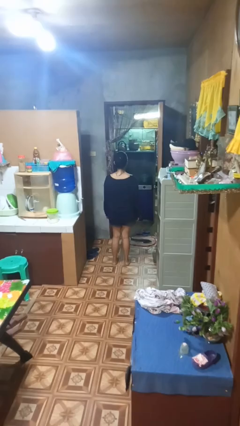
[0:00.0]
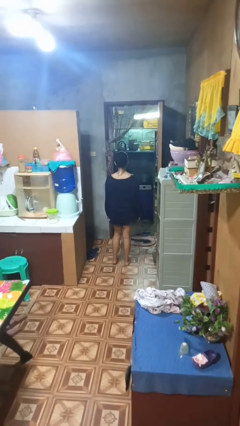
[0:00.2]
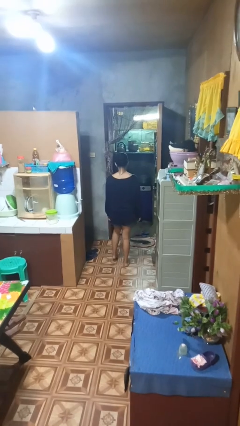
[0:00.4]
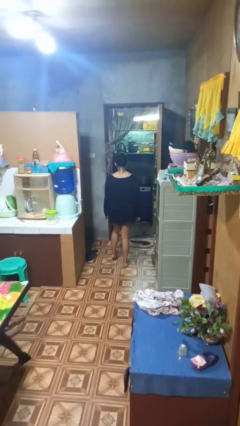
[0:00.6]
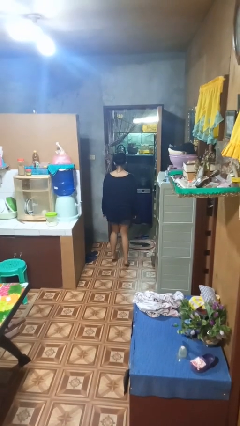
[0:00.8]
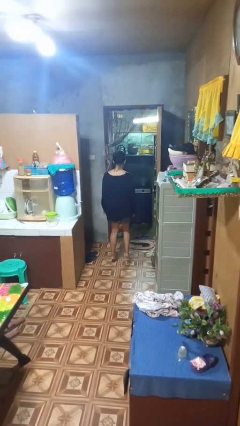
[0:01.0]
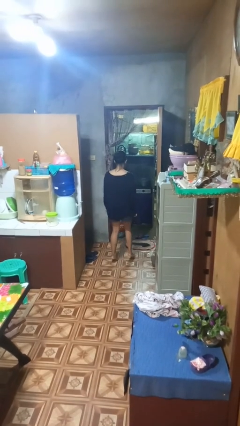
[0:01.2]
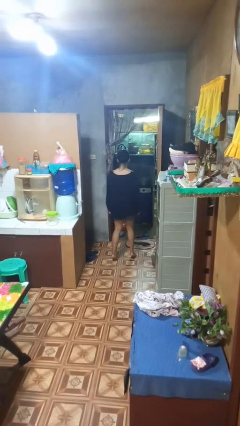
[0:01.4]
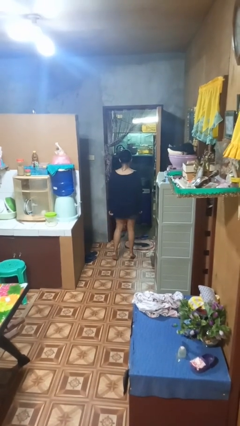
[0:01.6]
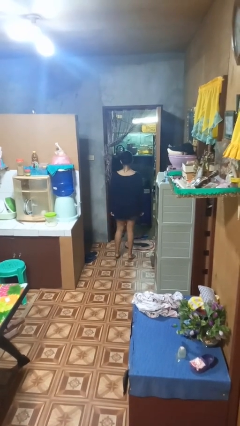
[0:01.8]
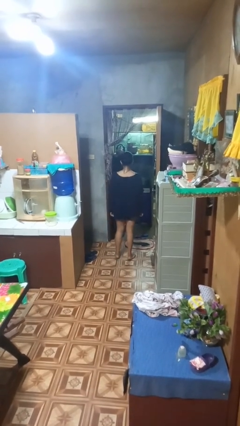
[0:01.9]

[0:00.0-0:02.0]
person walks tiptoe

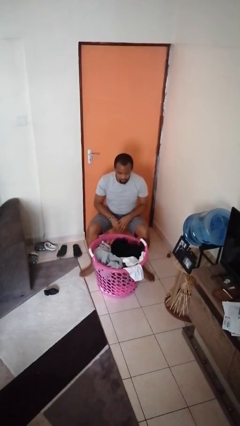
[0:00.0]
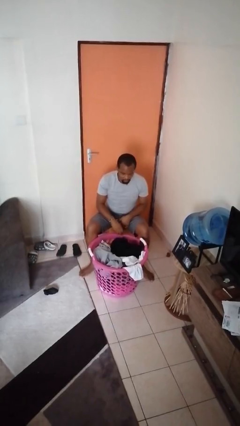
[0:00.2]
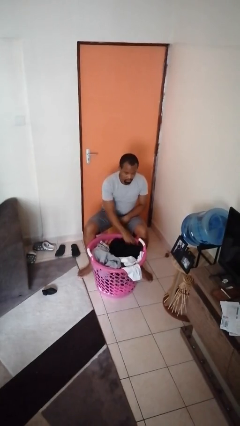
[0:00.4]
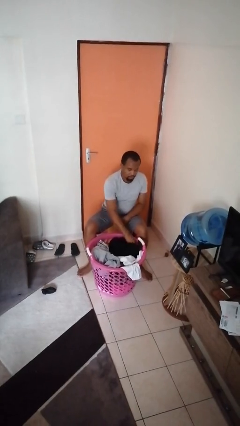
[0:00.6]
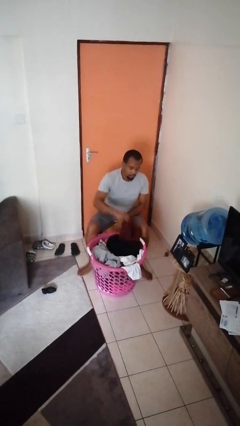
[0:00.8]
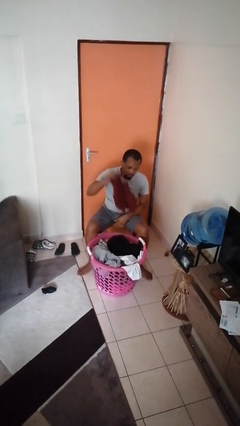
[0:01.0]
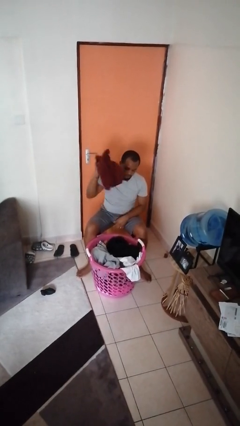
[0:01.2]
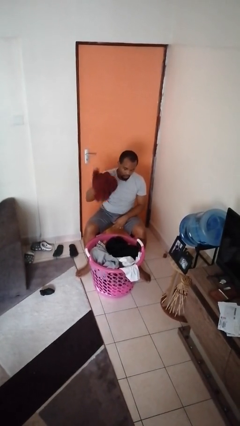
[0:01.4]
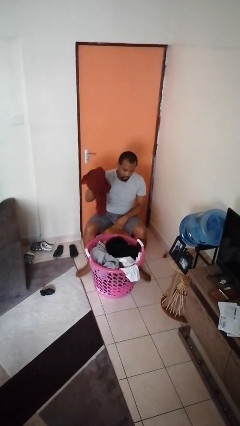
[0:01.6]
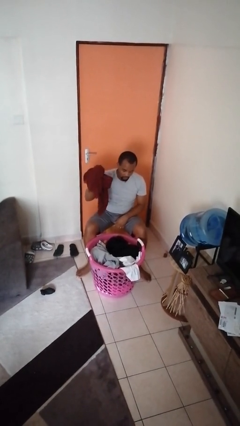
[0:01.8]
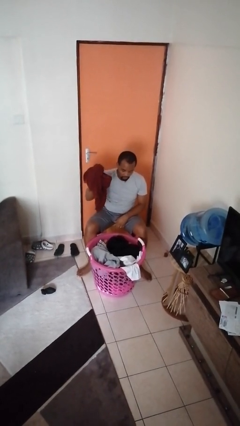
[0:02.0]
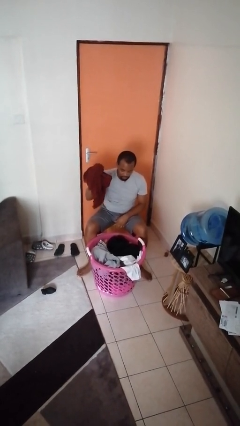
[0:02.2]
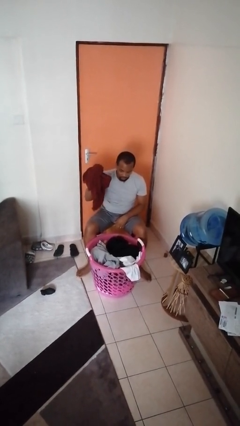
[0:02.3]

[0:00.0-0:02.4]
person takes object from basket

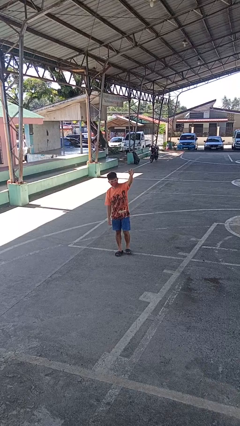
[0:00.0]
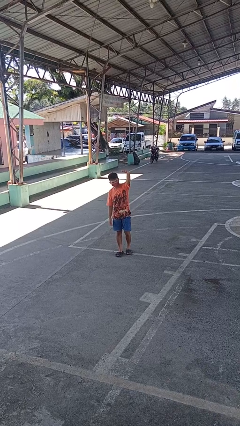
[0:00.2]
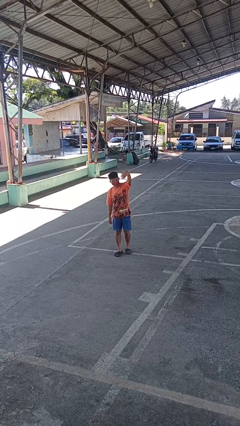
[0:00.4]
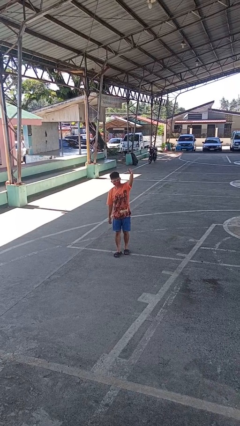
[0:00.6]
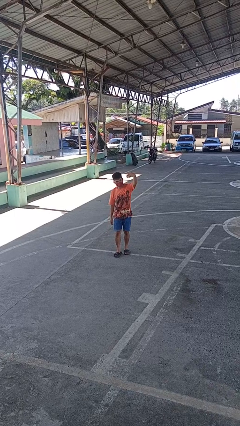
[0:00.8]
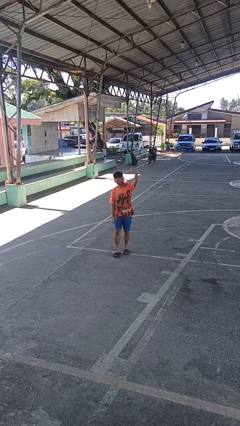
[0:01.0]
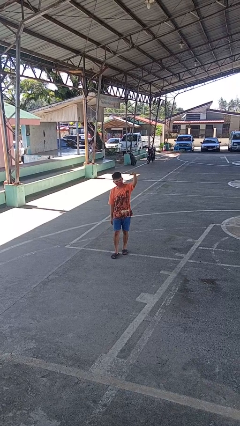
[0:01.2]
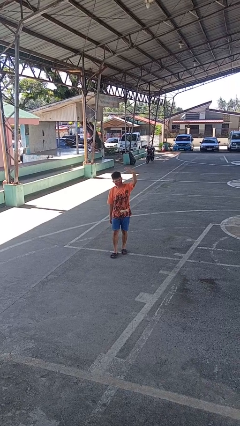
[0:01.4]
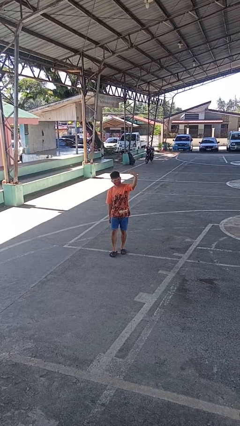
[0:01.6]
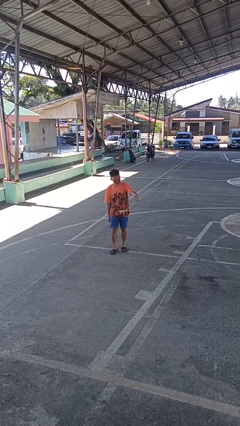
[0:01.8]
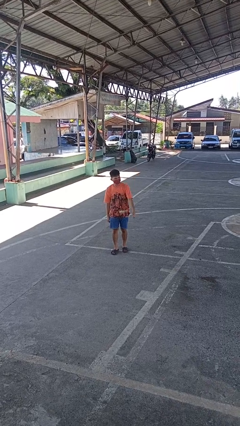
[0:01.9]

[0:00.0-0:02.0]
person gestures come here

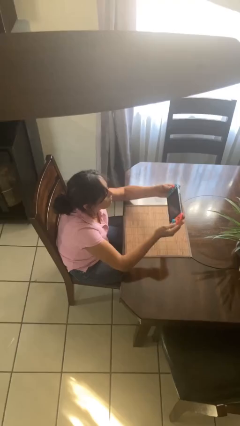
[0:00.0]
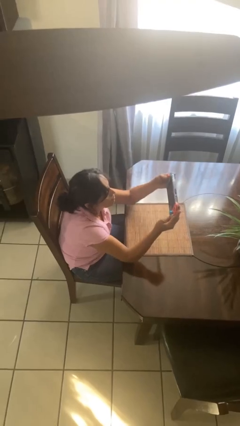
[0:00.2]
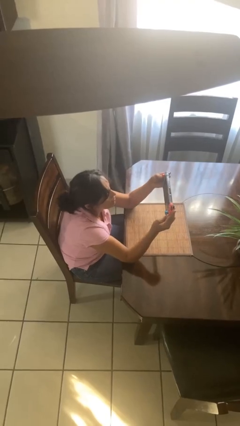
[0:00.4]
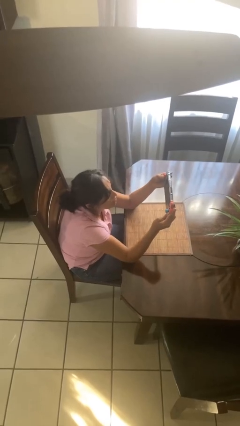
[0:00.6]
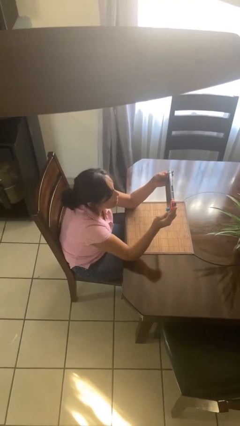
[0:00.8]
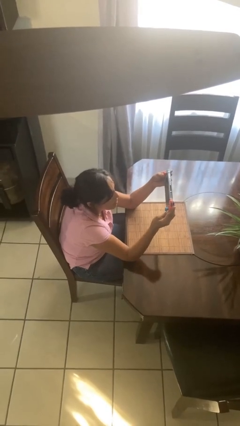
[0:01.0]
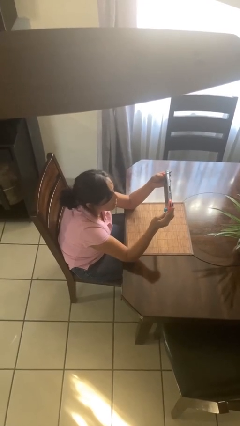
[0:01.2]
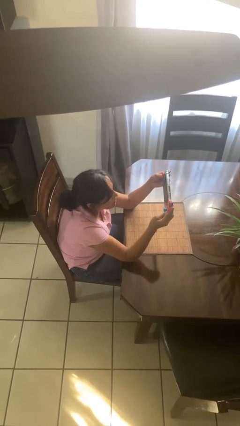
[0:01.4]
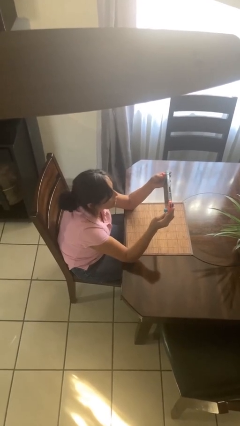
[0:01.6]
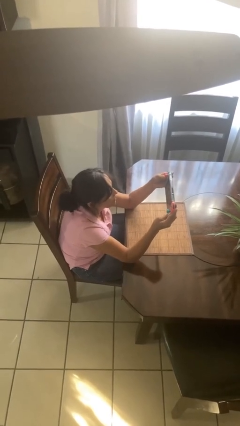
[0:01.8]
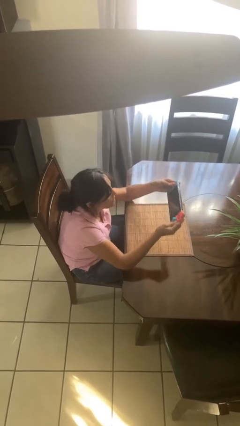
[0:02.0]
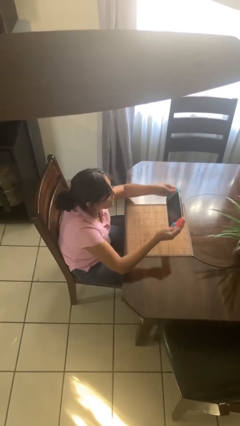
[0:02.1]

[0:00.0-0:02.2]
person interacts with handheld game

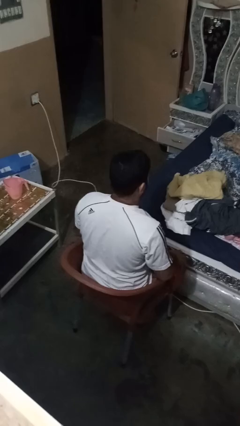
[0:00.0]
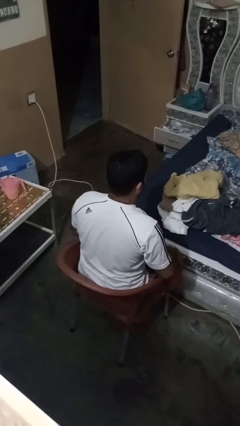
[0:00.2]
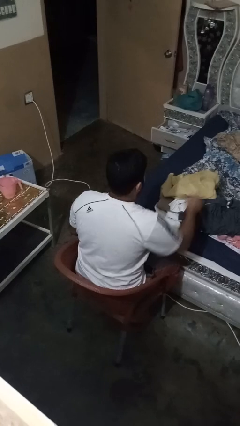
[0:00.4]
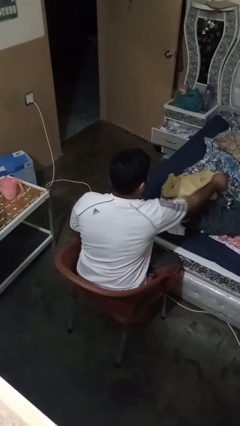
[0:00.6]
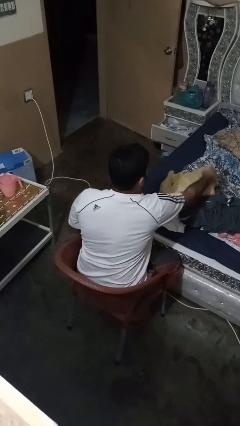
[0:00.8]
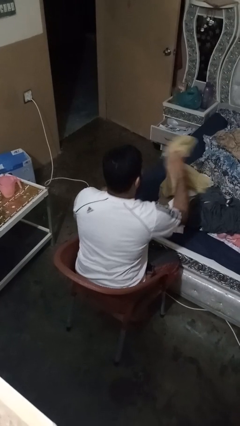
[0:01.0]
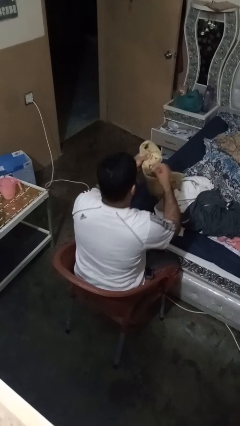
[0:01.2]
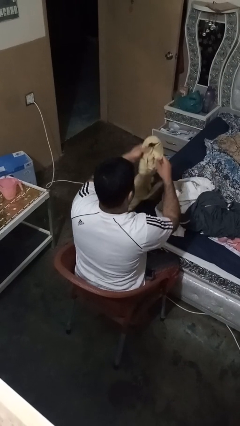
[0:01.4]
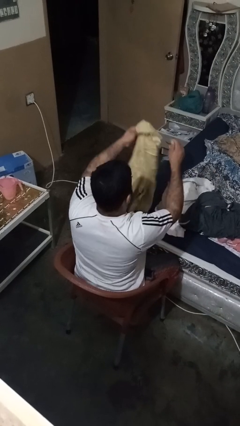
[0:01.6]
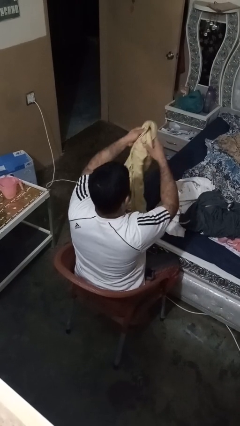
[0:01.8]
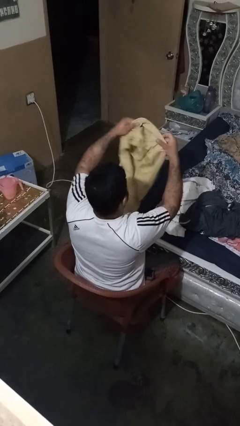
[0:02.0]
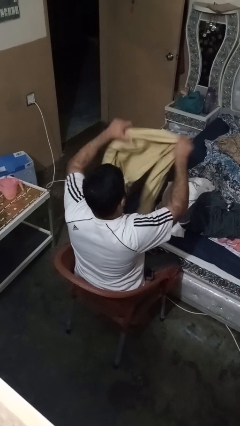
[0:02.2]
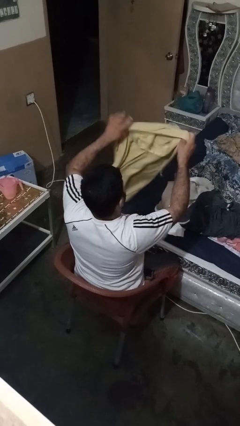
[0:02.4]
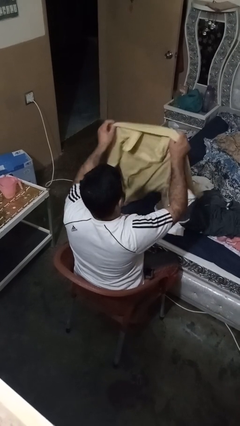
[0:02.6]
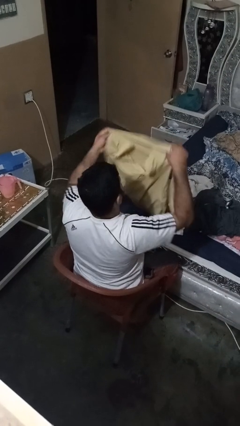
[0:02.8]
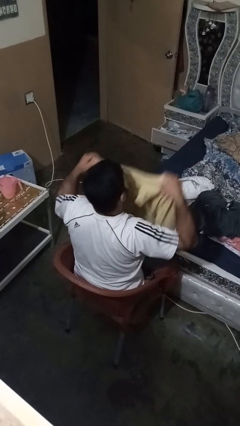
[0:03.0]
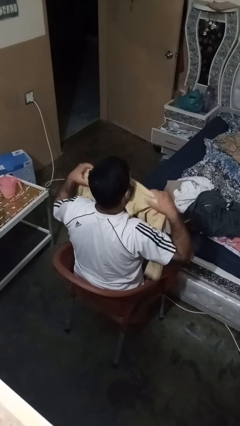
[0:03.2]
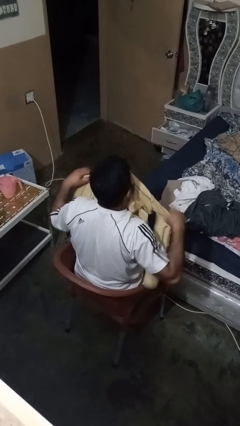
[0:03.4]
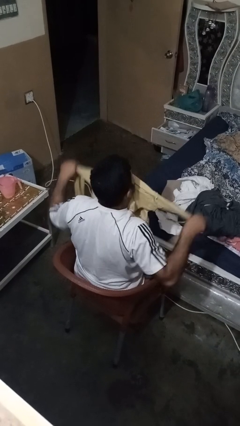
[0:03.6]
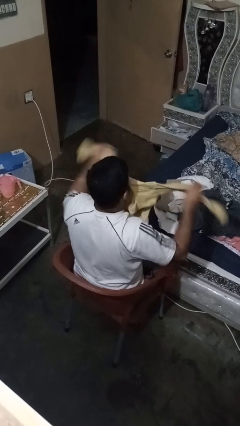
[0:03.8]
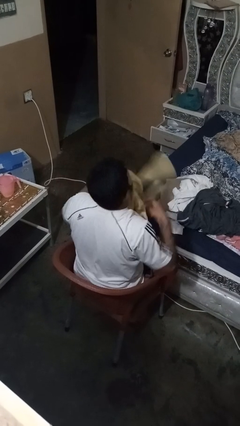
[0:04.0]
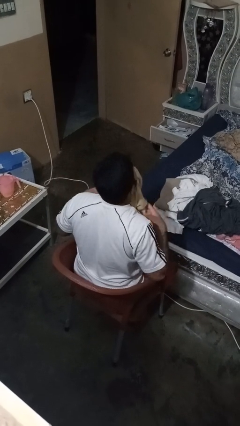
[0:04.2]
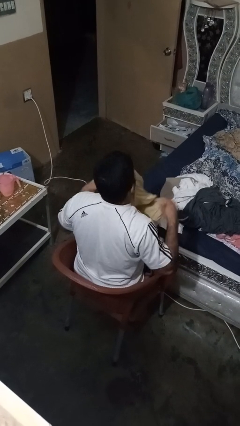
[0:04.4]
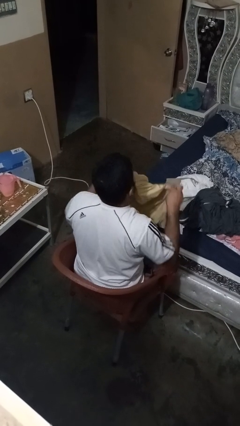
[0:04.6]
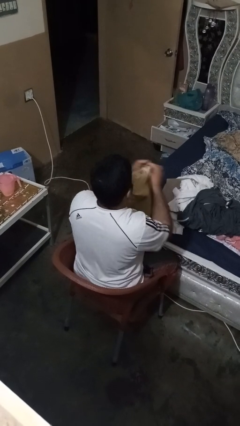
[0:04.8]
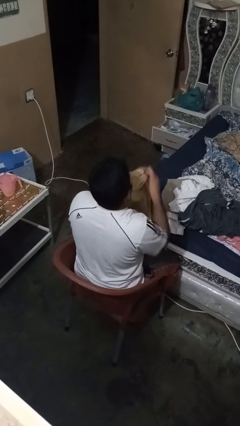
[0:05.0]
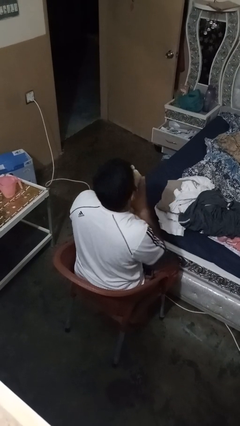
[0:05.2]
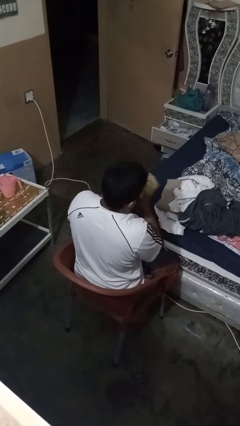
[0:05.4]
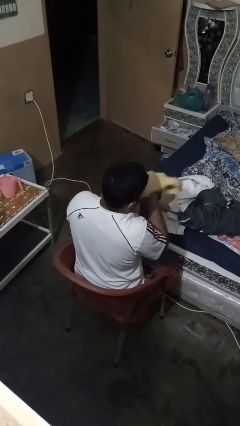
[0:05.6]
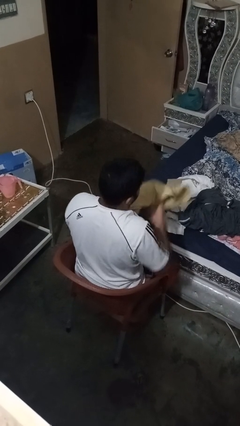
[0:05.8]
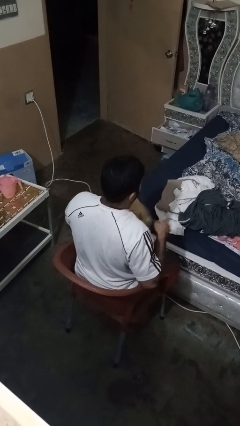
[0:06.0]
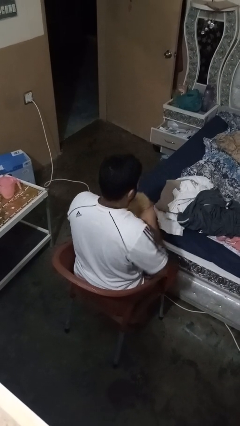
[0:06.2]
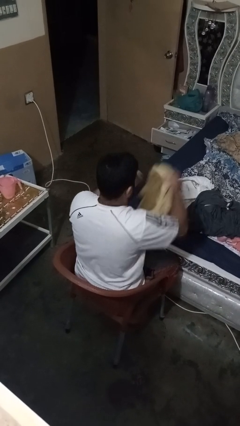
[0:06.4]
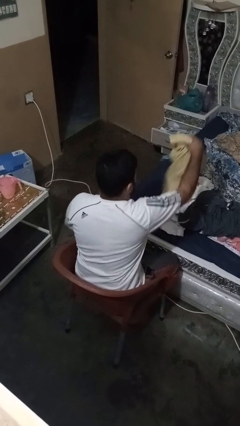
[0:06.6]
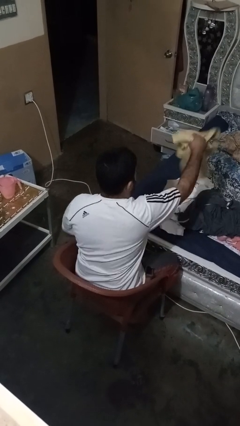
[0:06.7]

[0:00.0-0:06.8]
person folds shirt

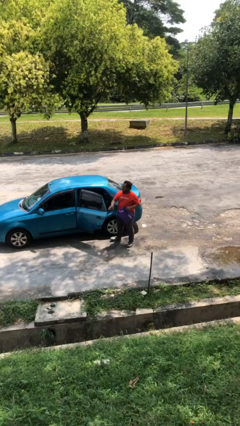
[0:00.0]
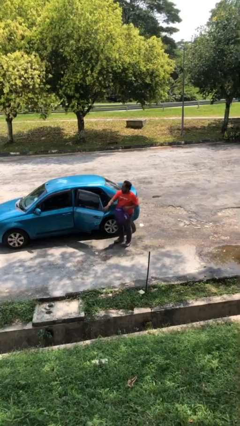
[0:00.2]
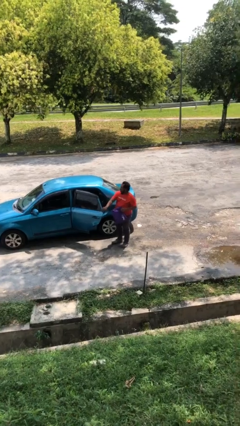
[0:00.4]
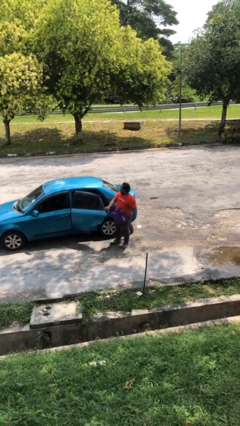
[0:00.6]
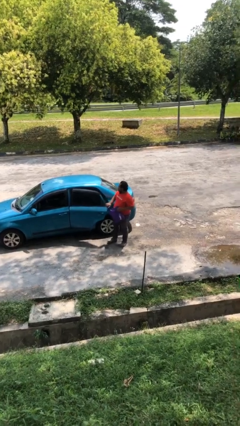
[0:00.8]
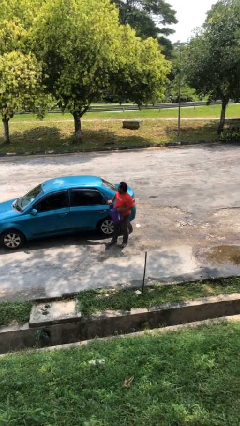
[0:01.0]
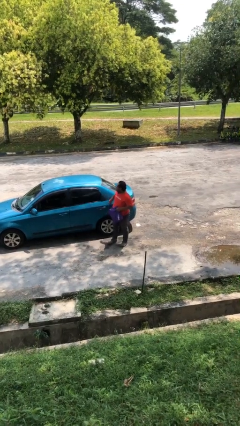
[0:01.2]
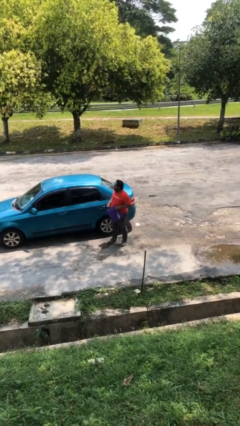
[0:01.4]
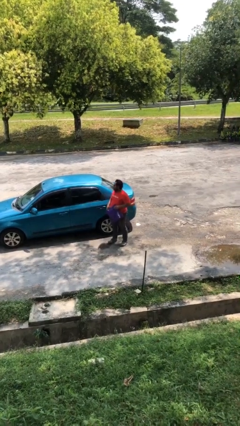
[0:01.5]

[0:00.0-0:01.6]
person closes car door

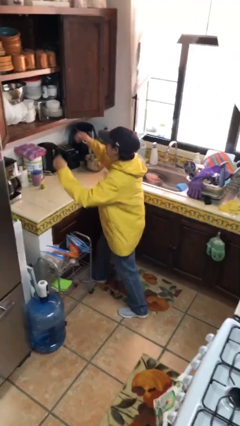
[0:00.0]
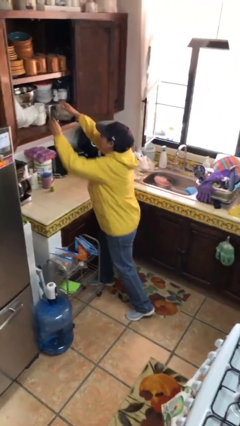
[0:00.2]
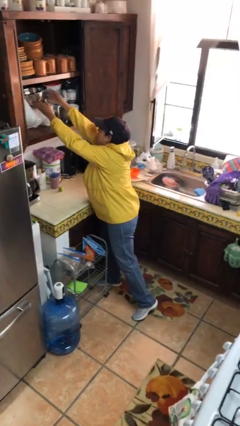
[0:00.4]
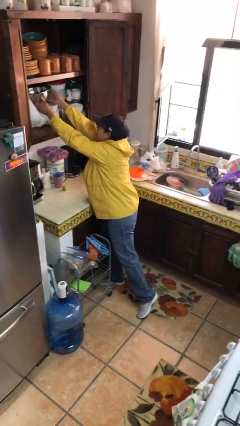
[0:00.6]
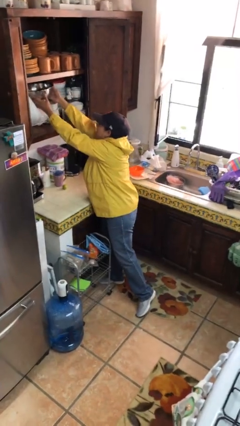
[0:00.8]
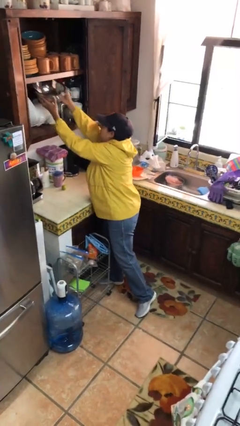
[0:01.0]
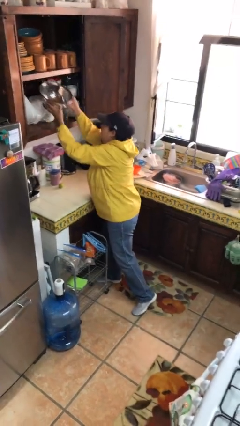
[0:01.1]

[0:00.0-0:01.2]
person picks up object from cabinet
